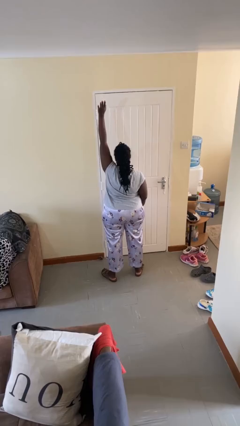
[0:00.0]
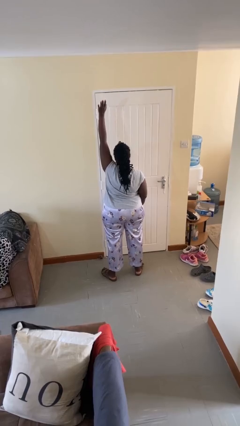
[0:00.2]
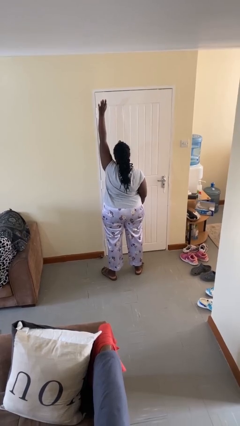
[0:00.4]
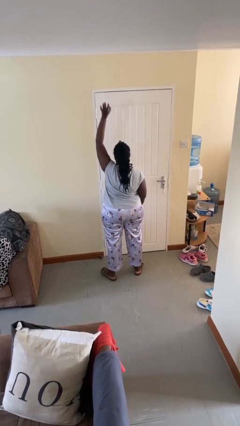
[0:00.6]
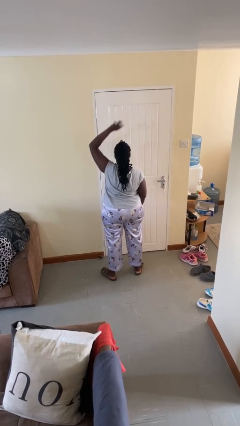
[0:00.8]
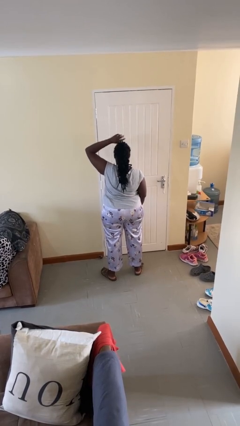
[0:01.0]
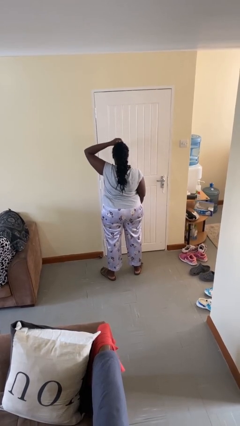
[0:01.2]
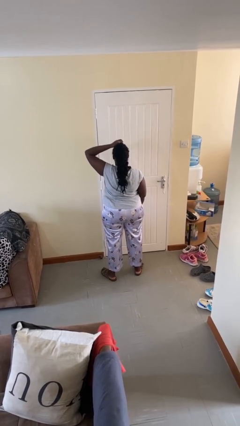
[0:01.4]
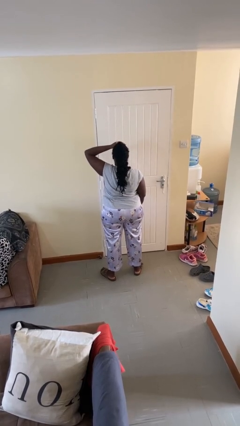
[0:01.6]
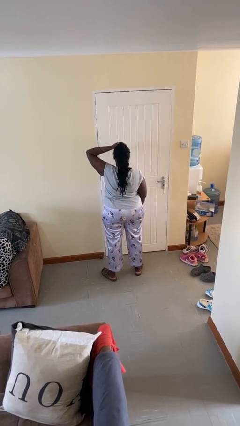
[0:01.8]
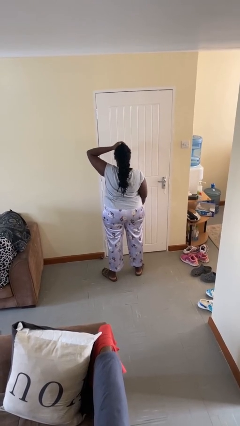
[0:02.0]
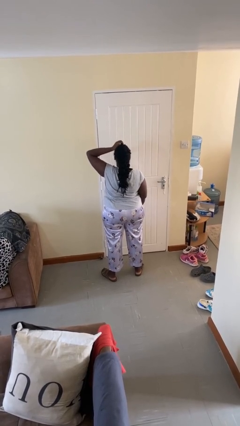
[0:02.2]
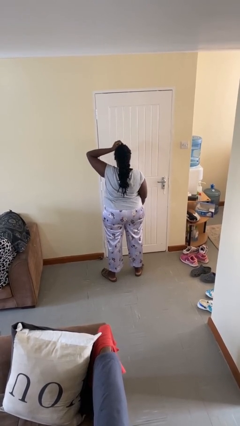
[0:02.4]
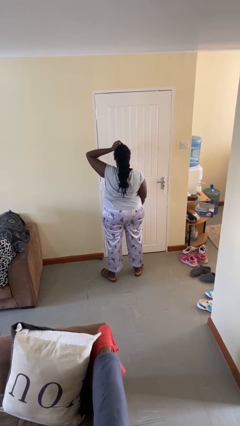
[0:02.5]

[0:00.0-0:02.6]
person gestures lower hand

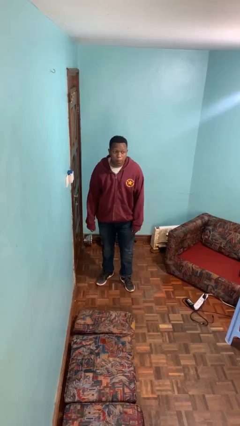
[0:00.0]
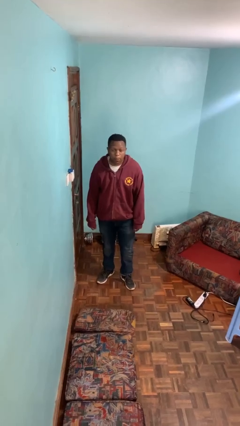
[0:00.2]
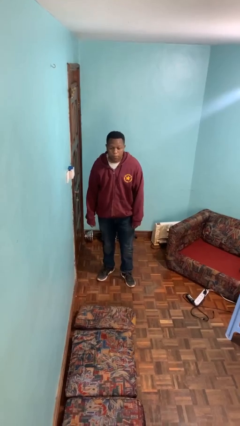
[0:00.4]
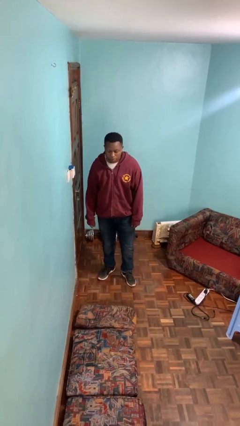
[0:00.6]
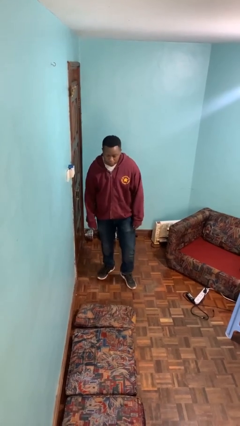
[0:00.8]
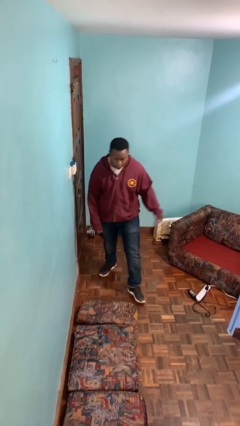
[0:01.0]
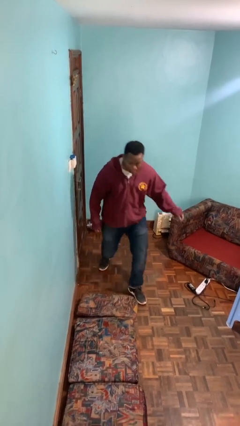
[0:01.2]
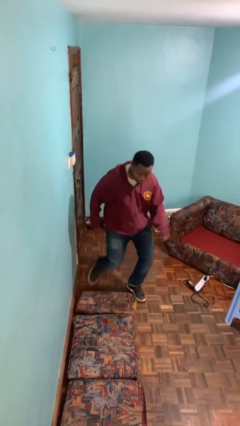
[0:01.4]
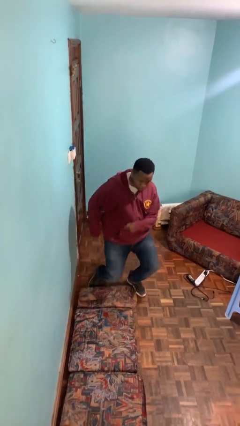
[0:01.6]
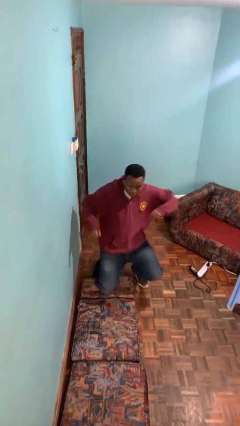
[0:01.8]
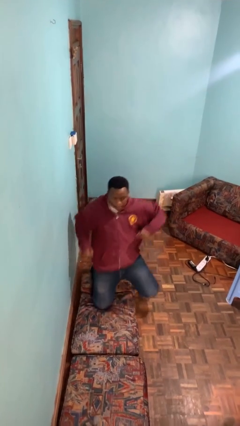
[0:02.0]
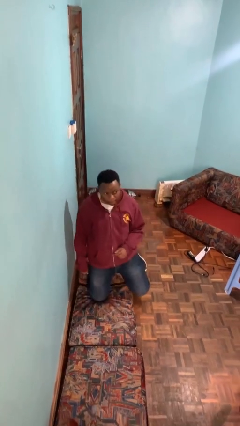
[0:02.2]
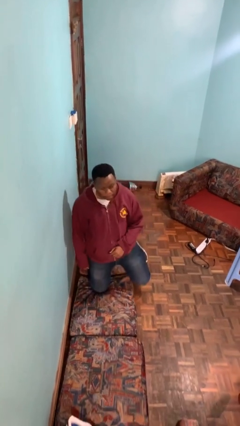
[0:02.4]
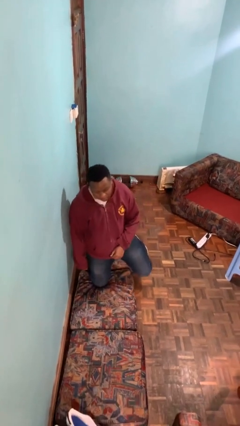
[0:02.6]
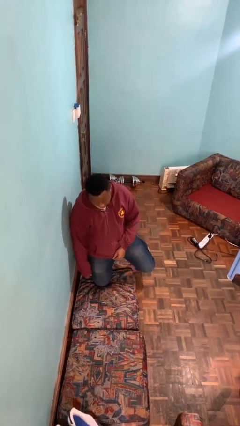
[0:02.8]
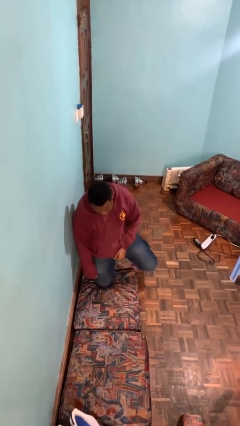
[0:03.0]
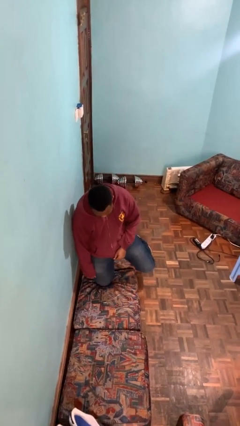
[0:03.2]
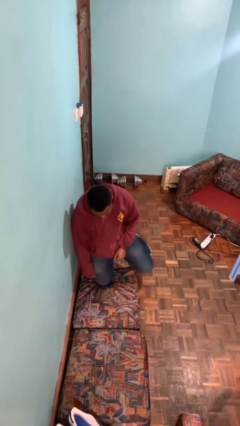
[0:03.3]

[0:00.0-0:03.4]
person trips on object on floor

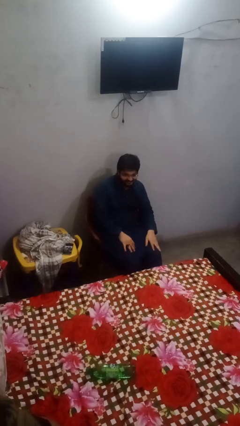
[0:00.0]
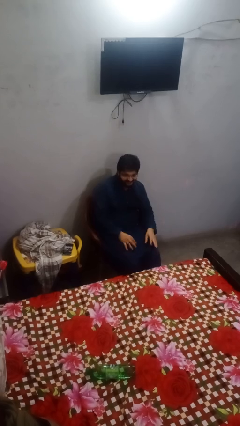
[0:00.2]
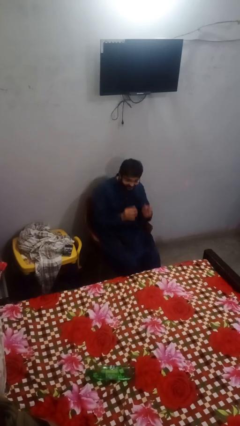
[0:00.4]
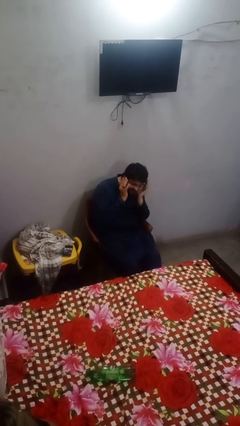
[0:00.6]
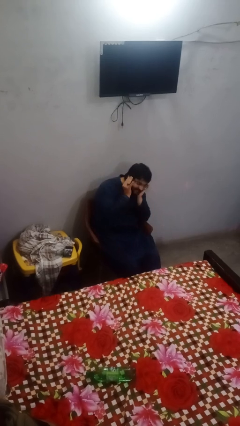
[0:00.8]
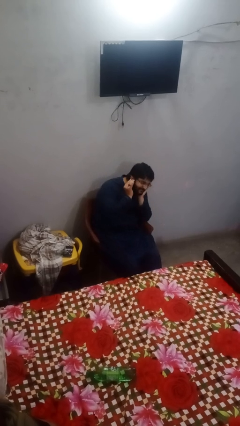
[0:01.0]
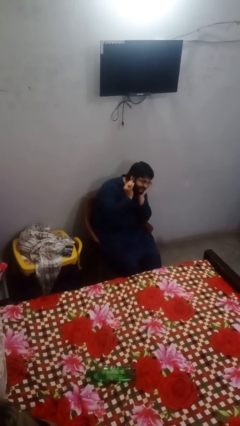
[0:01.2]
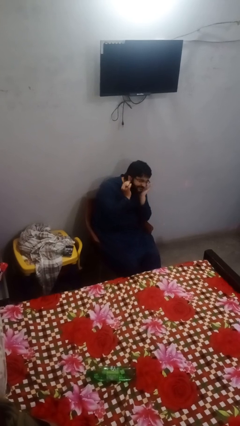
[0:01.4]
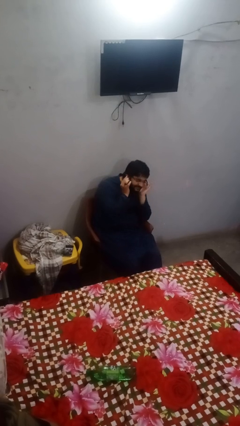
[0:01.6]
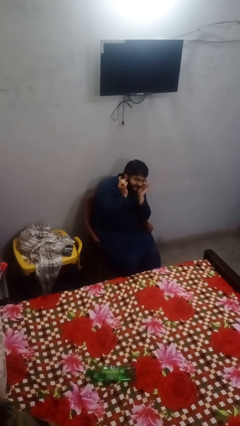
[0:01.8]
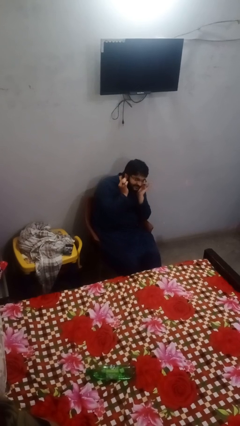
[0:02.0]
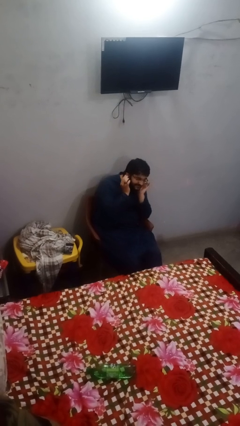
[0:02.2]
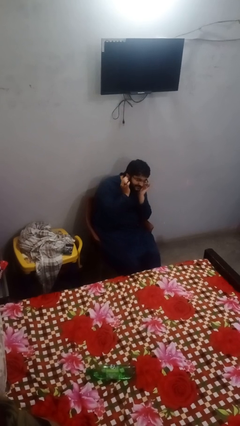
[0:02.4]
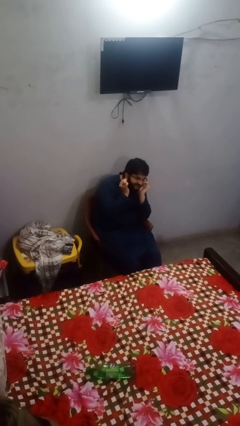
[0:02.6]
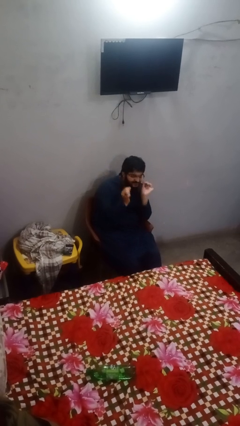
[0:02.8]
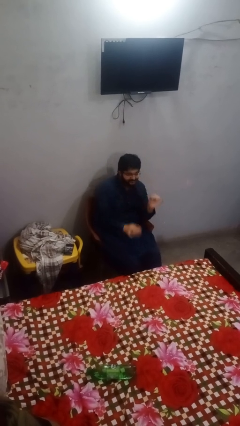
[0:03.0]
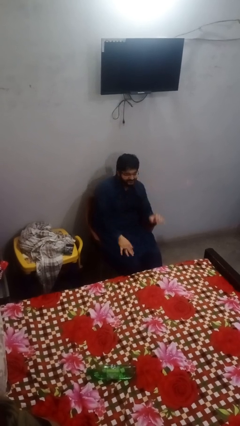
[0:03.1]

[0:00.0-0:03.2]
person touches earlobe

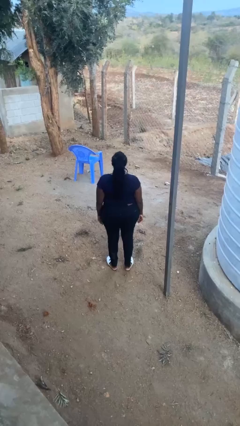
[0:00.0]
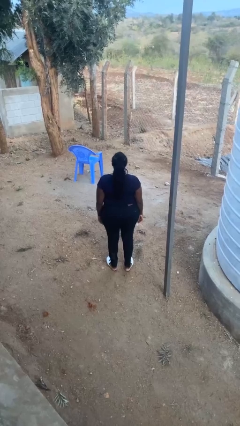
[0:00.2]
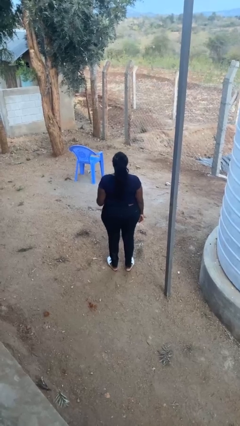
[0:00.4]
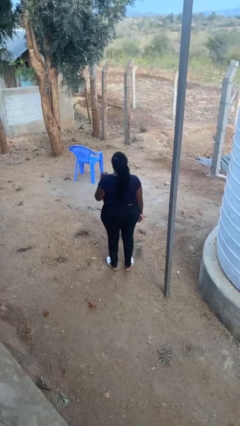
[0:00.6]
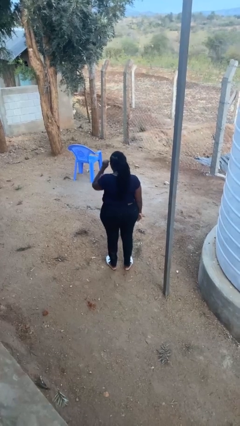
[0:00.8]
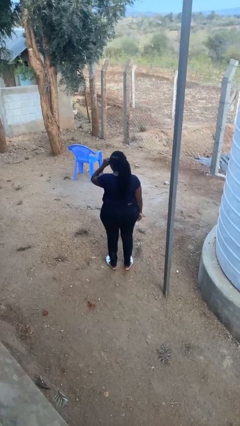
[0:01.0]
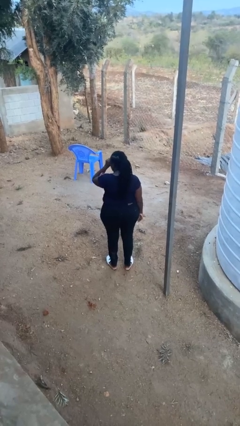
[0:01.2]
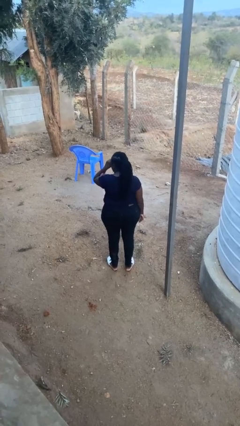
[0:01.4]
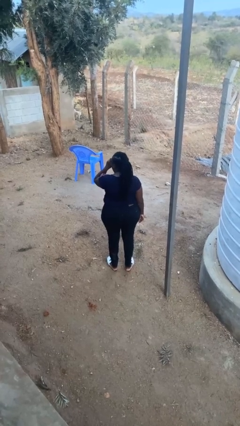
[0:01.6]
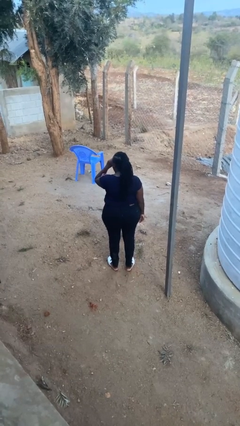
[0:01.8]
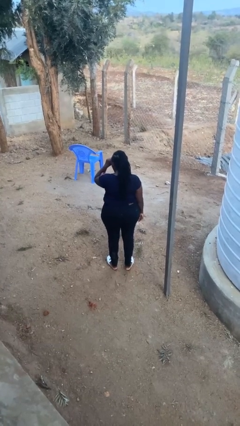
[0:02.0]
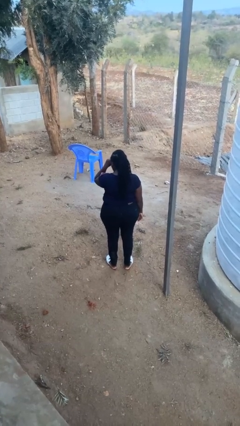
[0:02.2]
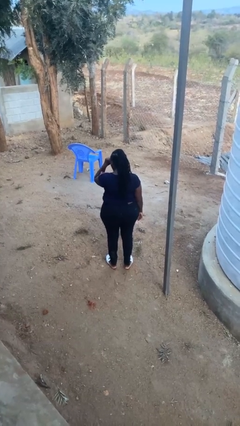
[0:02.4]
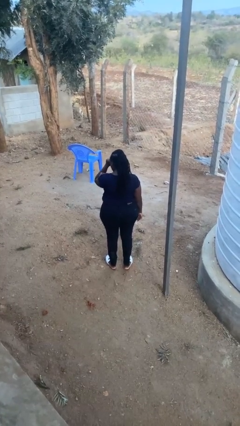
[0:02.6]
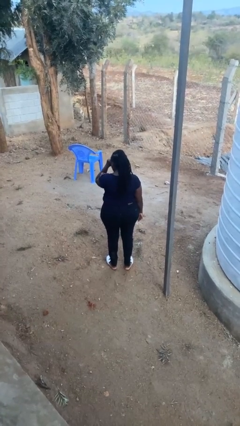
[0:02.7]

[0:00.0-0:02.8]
person rubs eyes

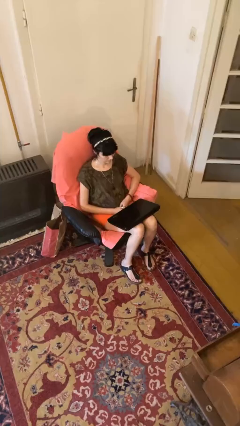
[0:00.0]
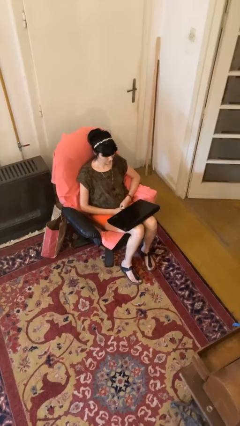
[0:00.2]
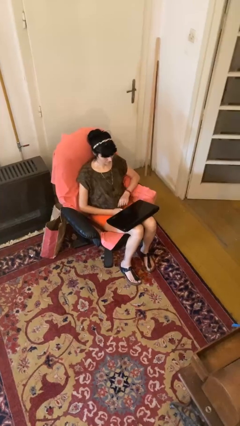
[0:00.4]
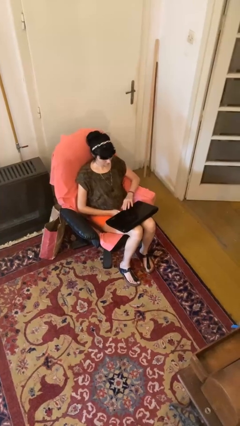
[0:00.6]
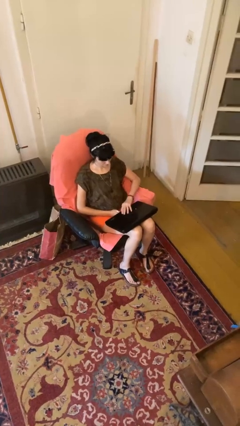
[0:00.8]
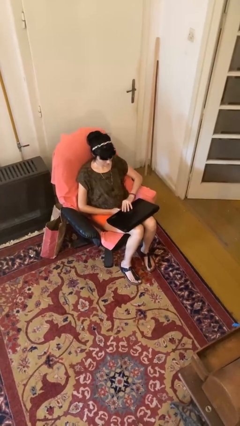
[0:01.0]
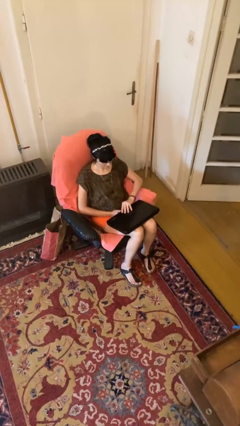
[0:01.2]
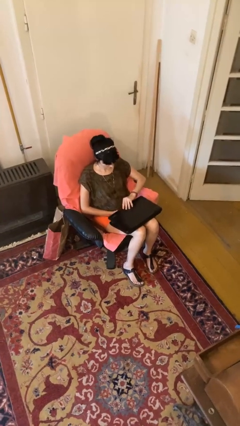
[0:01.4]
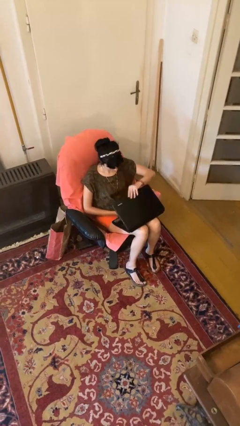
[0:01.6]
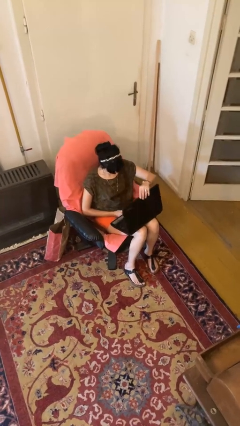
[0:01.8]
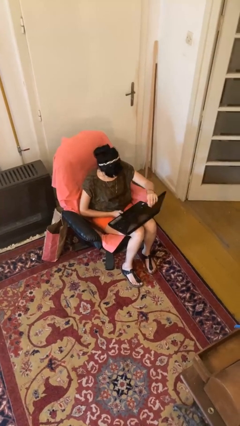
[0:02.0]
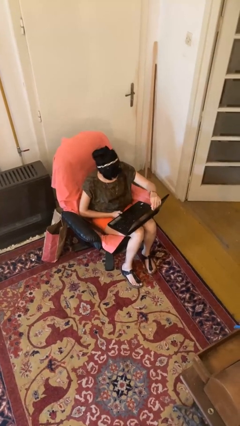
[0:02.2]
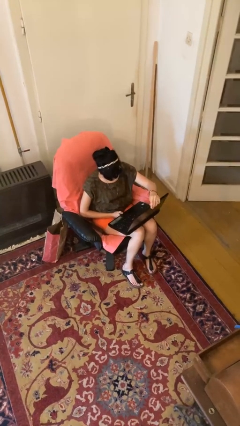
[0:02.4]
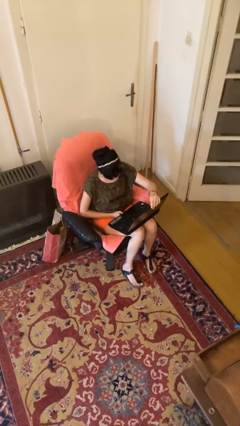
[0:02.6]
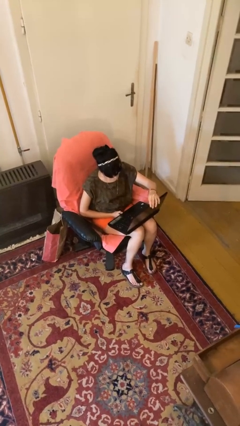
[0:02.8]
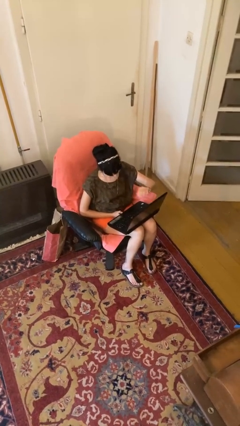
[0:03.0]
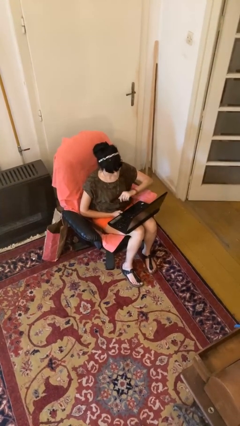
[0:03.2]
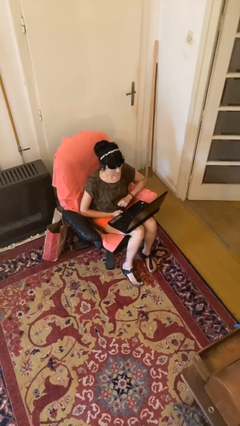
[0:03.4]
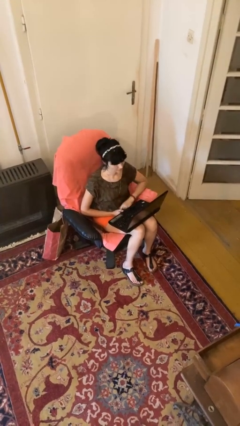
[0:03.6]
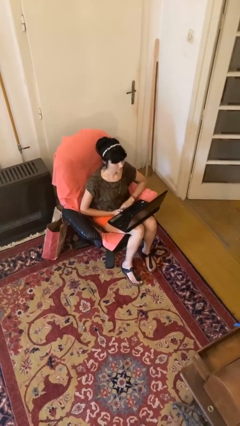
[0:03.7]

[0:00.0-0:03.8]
person opens laptop

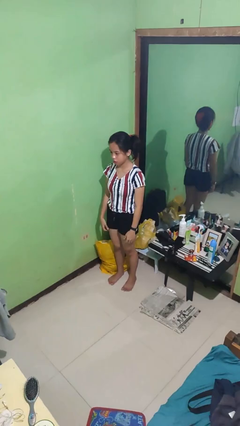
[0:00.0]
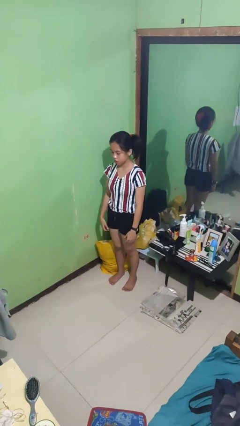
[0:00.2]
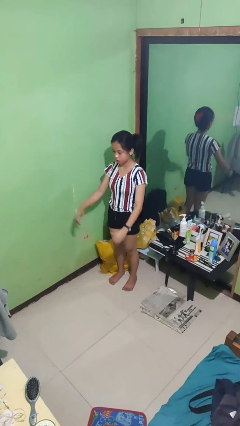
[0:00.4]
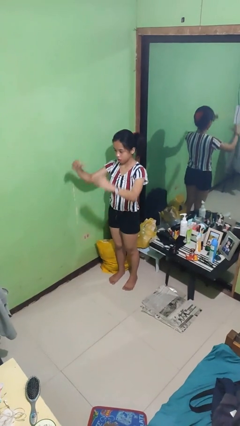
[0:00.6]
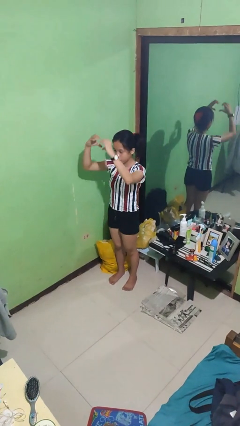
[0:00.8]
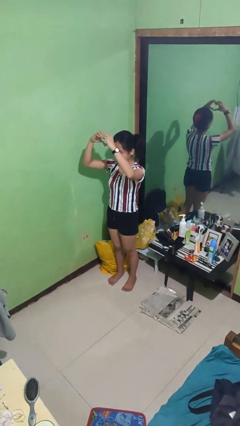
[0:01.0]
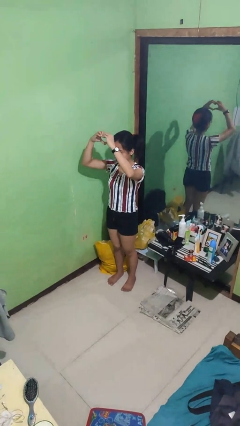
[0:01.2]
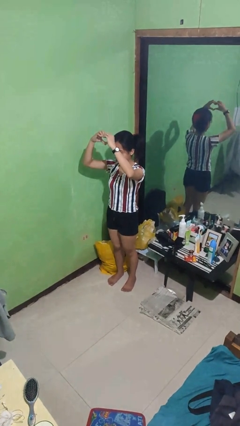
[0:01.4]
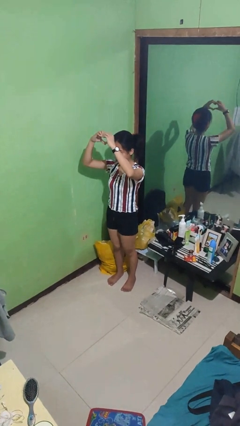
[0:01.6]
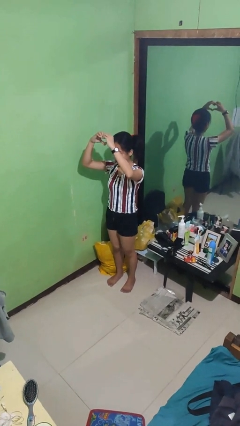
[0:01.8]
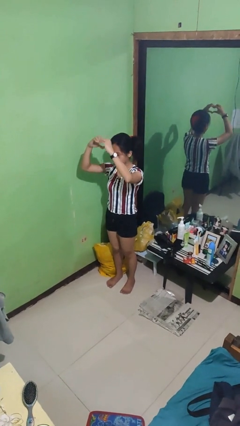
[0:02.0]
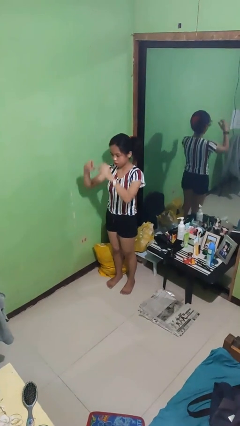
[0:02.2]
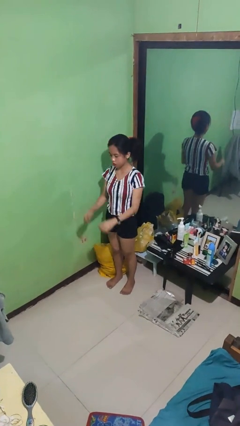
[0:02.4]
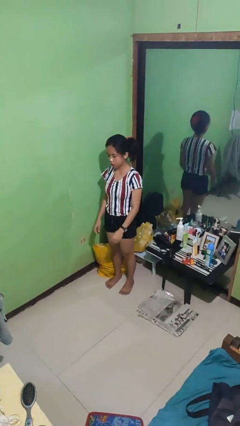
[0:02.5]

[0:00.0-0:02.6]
person gestures heart
